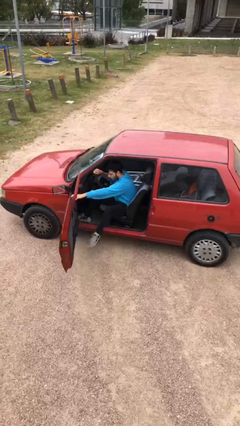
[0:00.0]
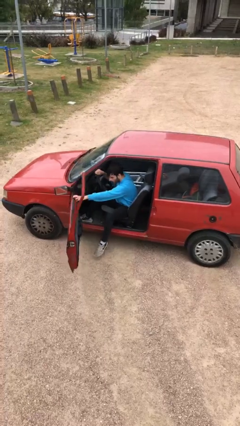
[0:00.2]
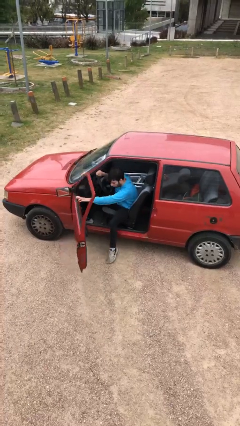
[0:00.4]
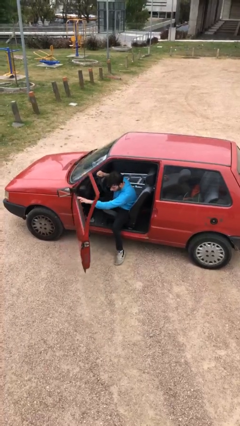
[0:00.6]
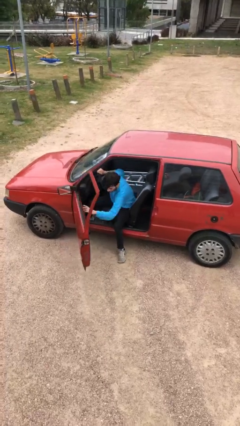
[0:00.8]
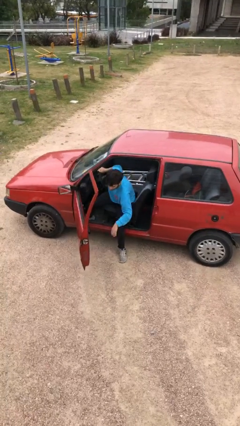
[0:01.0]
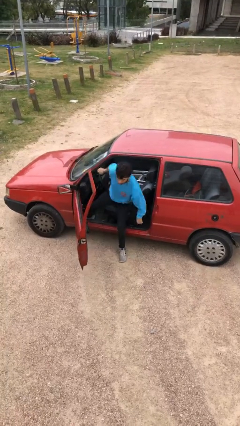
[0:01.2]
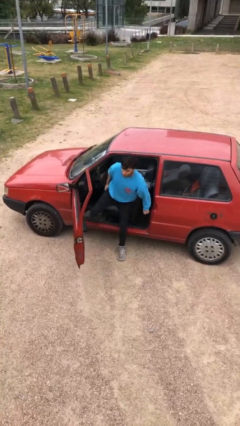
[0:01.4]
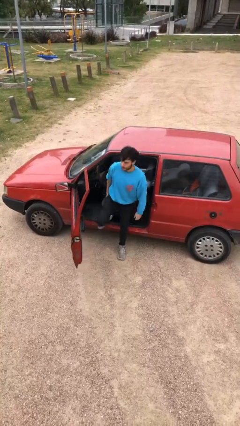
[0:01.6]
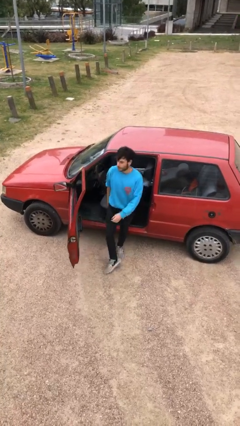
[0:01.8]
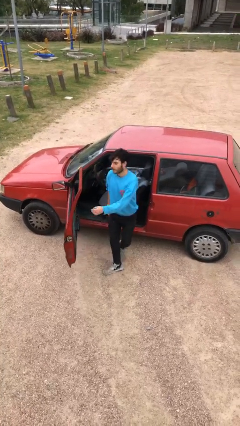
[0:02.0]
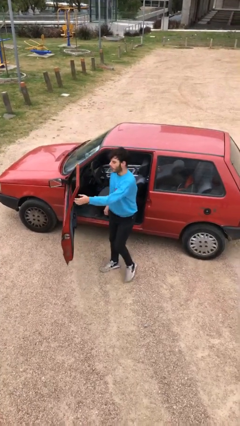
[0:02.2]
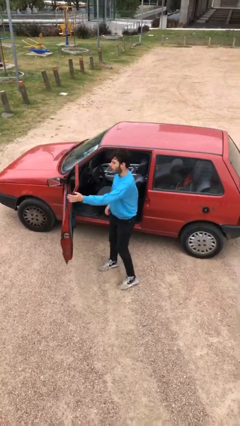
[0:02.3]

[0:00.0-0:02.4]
person exits car

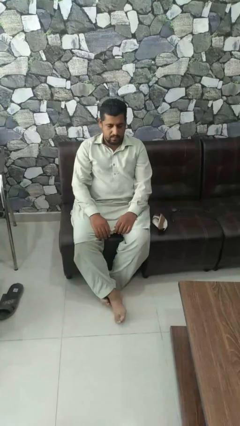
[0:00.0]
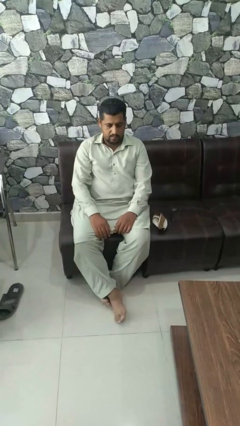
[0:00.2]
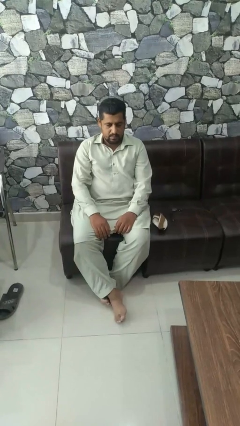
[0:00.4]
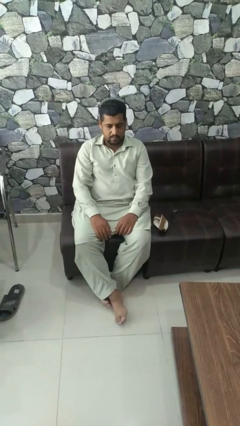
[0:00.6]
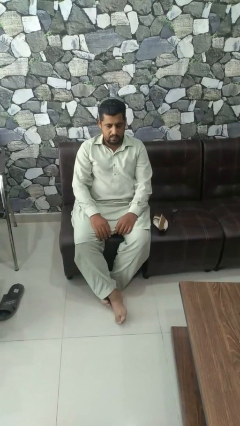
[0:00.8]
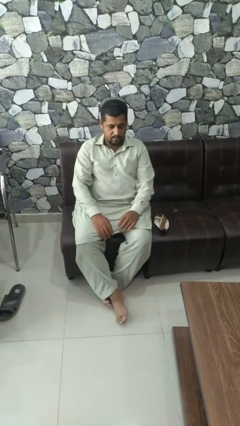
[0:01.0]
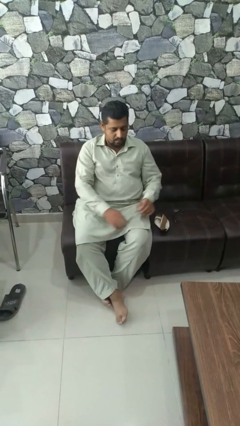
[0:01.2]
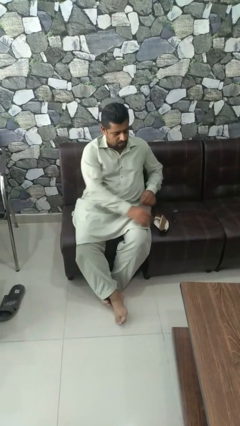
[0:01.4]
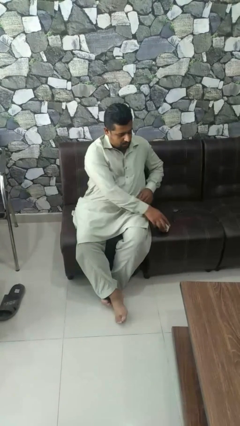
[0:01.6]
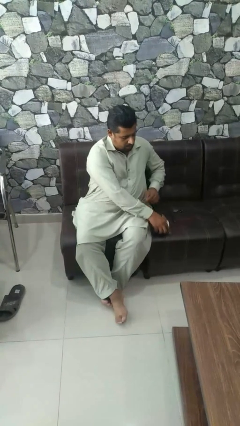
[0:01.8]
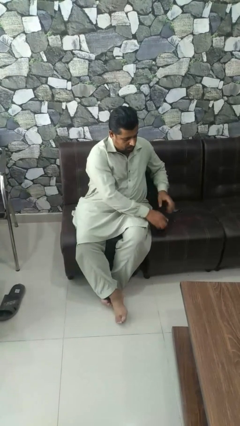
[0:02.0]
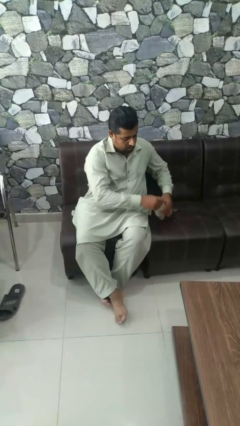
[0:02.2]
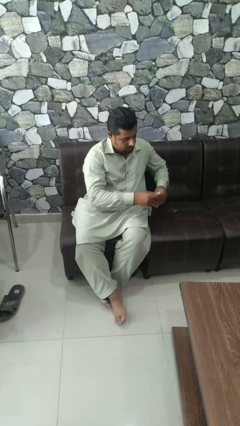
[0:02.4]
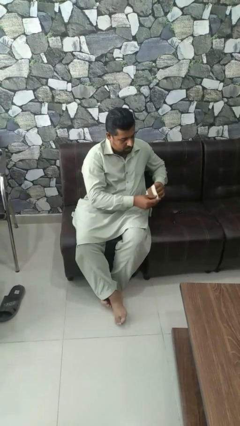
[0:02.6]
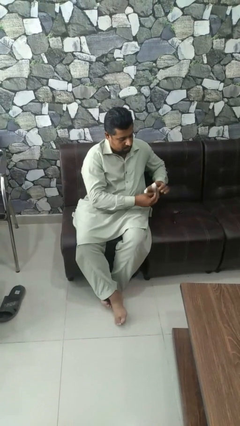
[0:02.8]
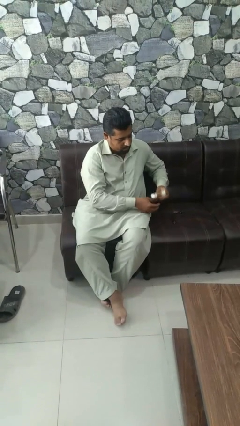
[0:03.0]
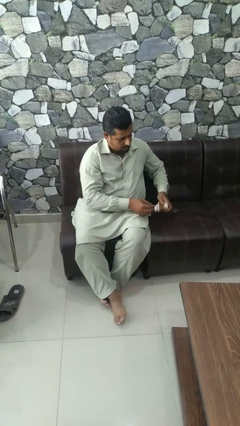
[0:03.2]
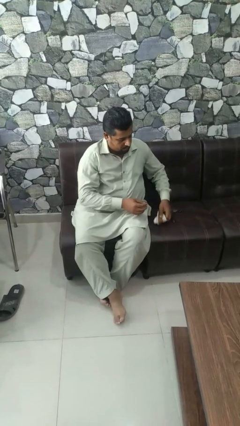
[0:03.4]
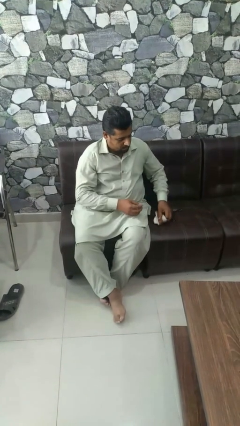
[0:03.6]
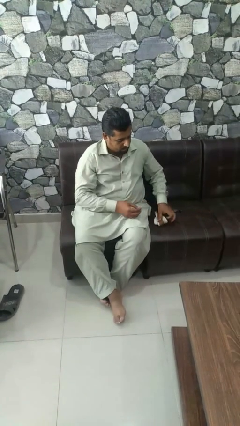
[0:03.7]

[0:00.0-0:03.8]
person folds socks

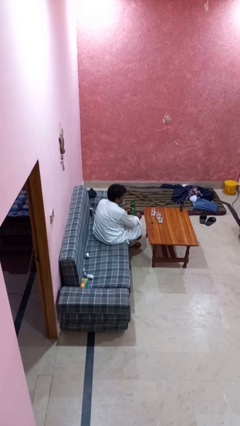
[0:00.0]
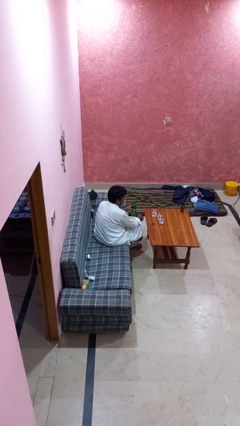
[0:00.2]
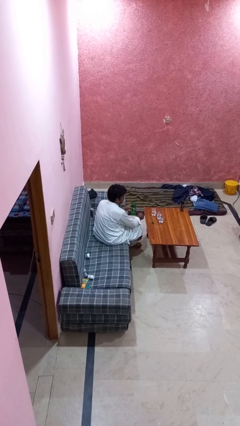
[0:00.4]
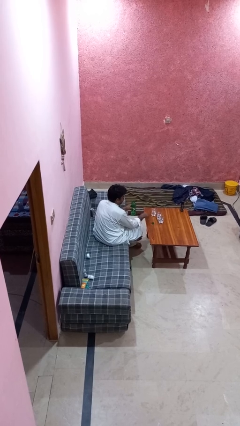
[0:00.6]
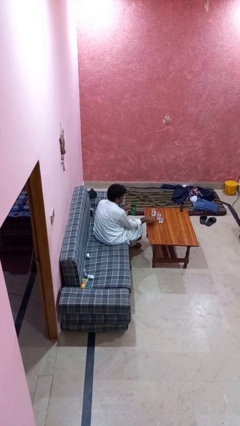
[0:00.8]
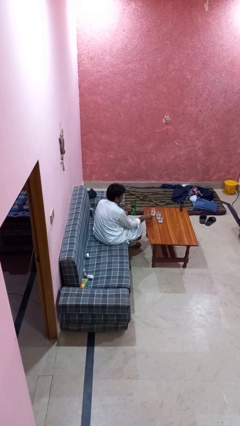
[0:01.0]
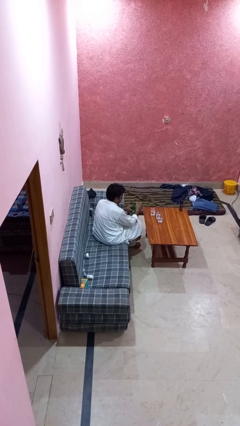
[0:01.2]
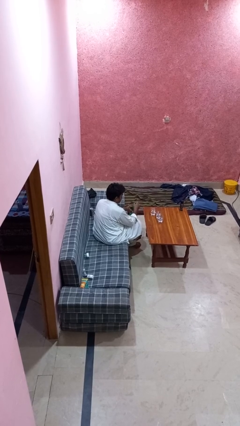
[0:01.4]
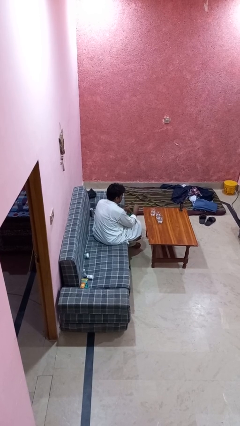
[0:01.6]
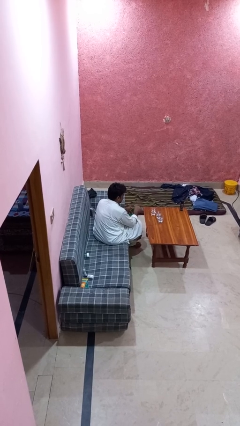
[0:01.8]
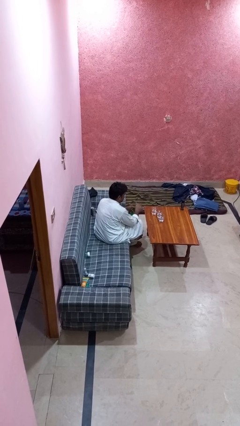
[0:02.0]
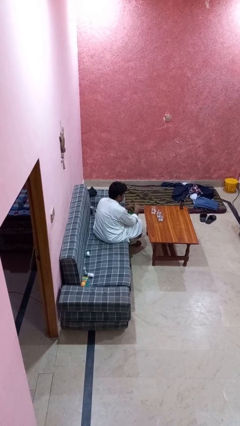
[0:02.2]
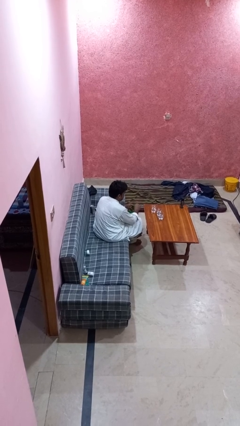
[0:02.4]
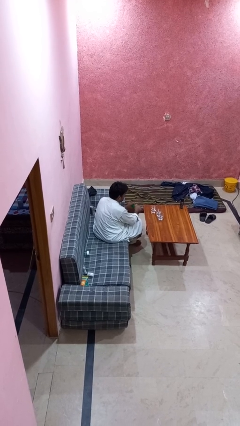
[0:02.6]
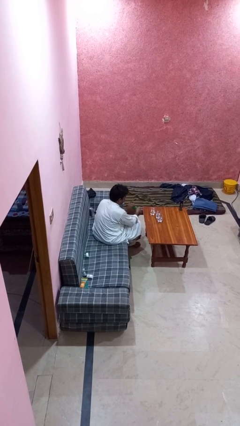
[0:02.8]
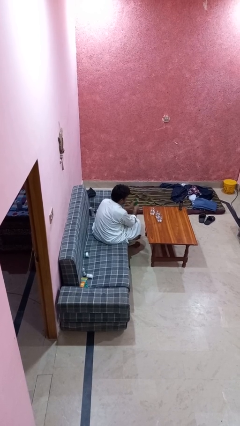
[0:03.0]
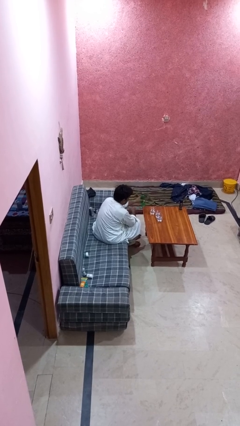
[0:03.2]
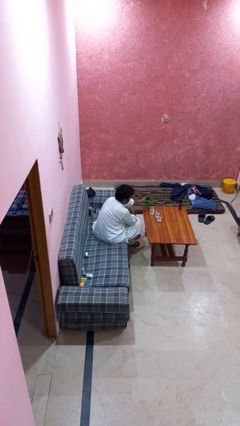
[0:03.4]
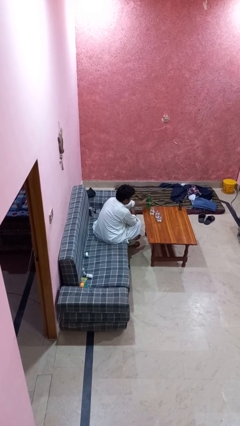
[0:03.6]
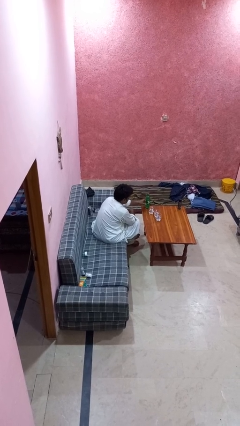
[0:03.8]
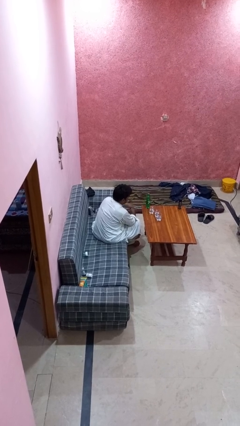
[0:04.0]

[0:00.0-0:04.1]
person screws lid to bottle

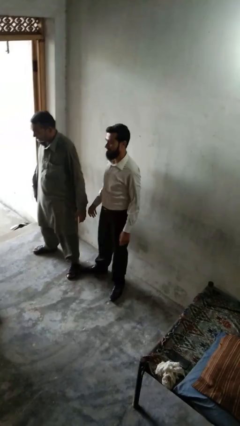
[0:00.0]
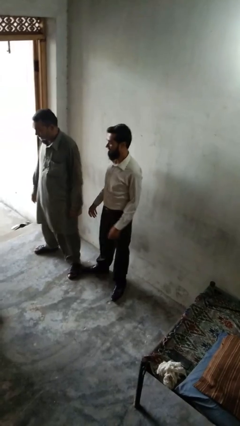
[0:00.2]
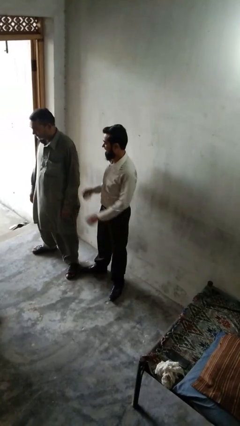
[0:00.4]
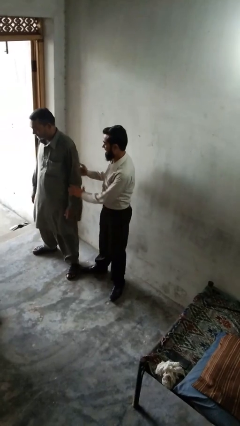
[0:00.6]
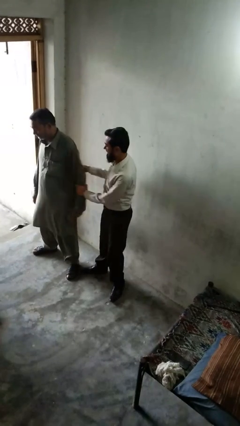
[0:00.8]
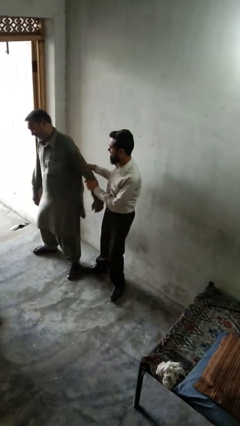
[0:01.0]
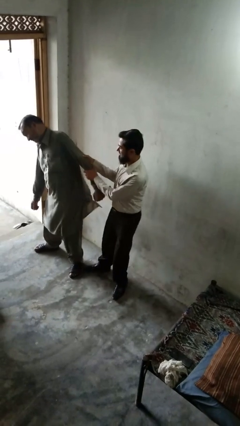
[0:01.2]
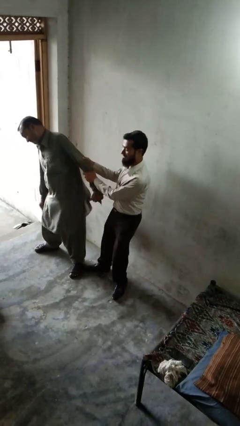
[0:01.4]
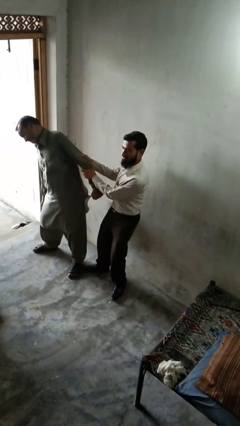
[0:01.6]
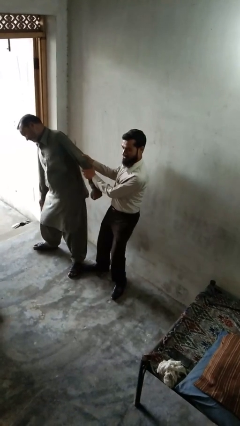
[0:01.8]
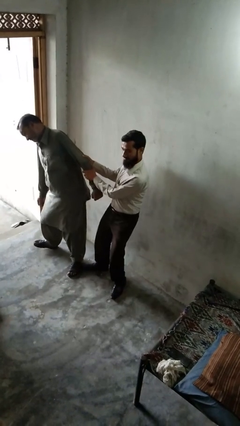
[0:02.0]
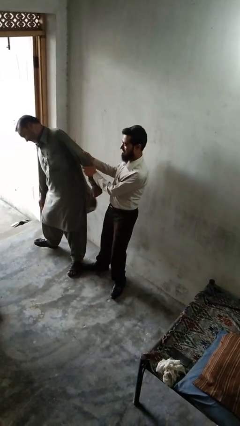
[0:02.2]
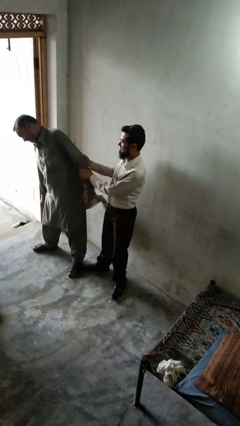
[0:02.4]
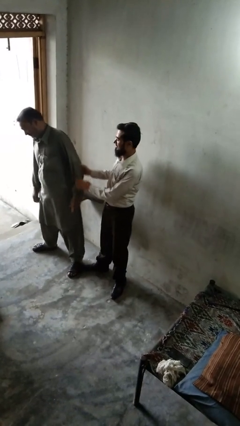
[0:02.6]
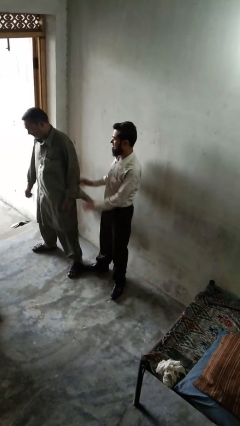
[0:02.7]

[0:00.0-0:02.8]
person grabs person by forearm

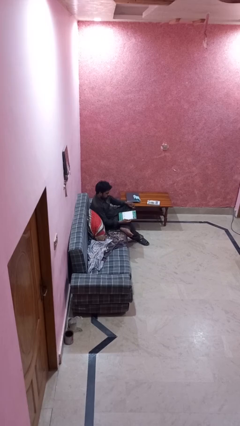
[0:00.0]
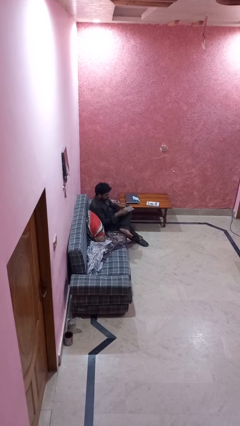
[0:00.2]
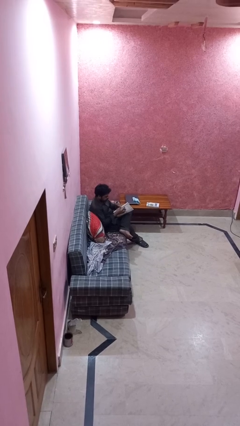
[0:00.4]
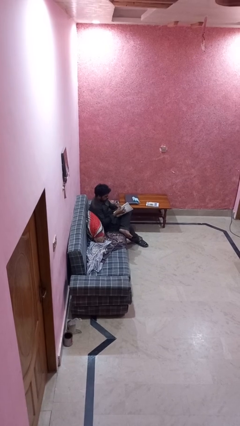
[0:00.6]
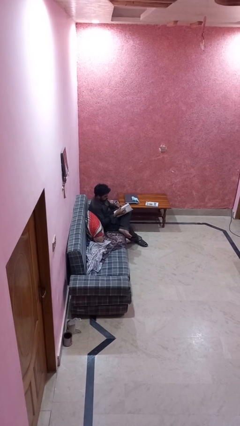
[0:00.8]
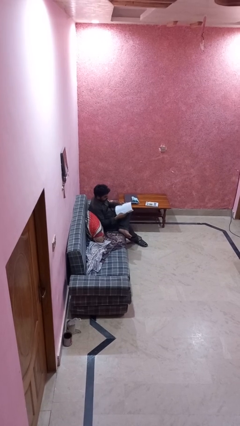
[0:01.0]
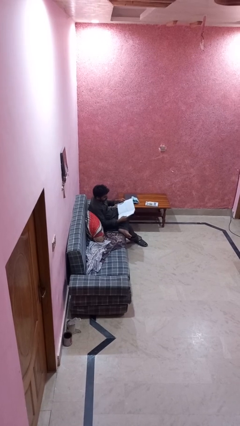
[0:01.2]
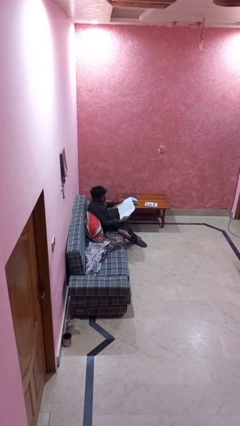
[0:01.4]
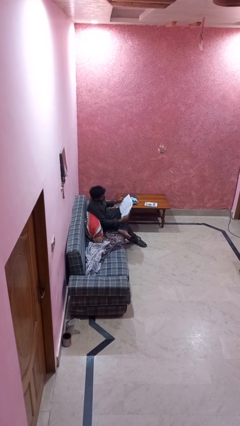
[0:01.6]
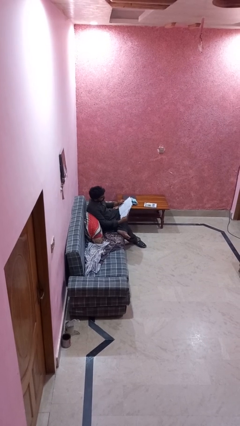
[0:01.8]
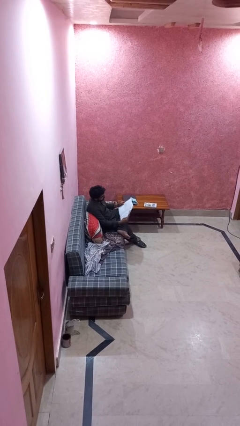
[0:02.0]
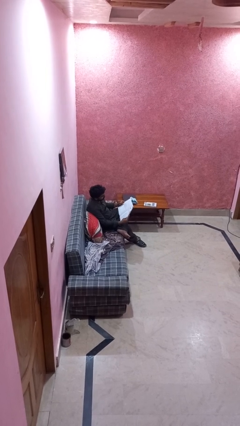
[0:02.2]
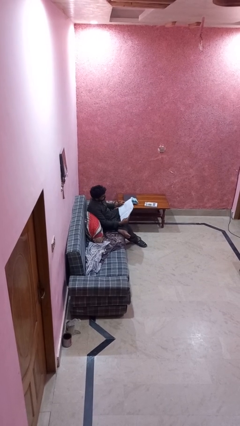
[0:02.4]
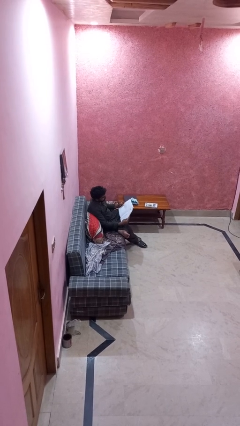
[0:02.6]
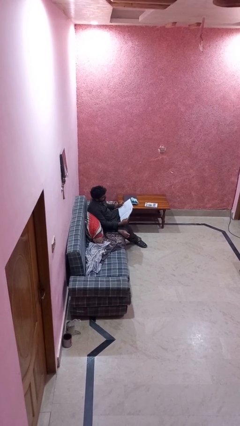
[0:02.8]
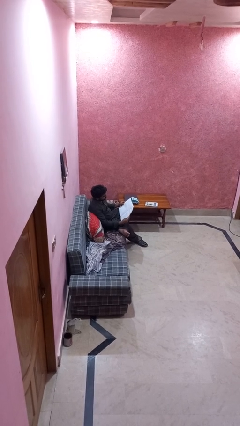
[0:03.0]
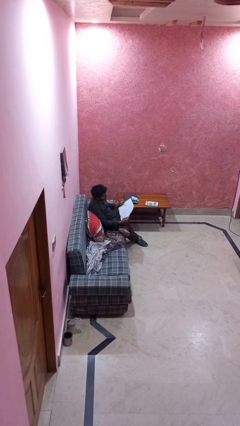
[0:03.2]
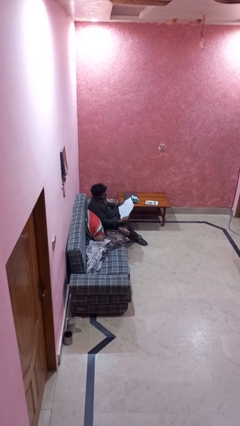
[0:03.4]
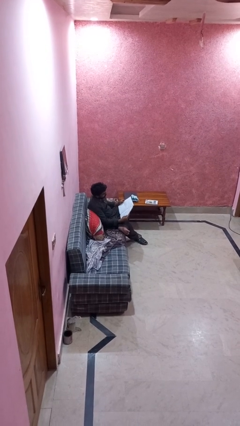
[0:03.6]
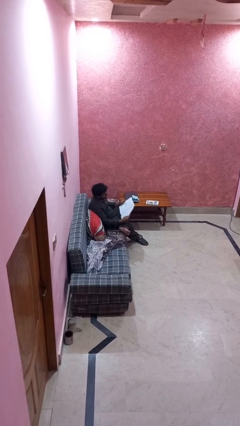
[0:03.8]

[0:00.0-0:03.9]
person reads magazine

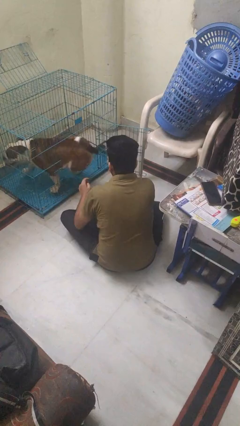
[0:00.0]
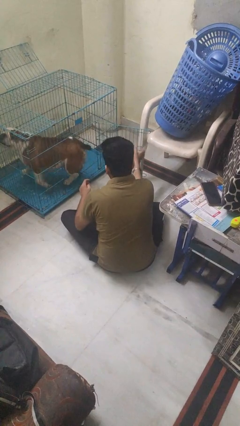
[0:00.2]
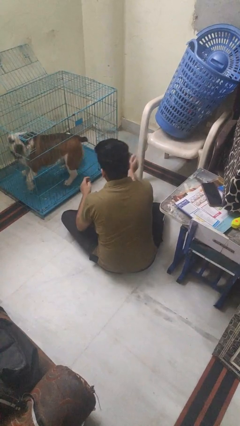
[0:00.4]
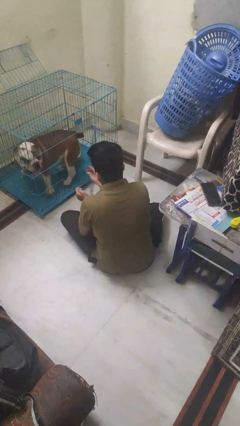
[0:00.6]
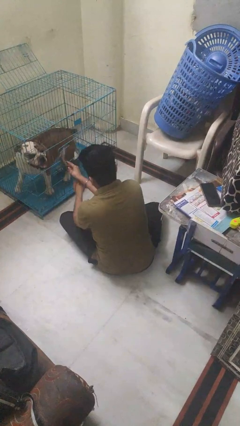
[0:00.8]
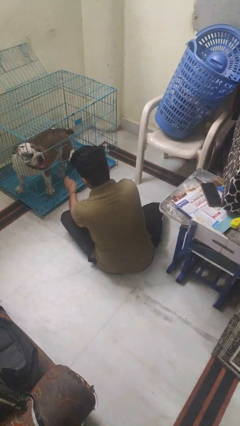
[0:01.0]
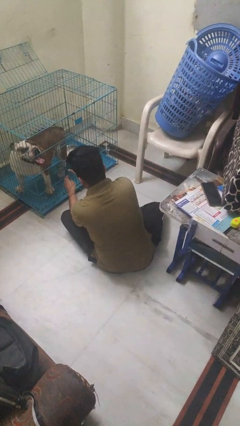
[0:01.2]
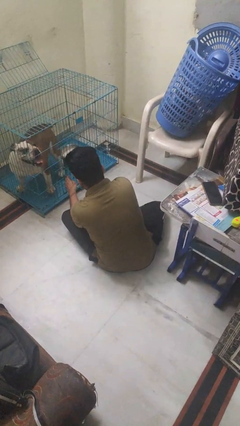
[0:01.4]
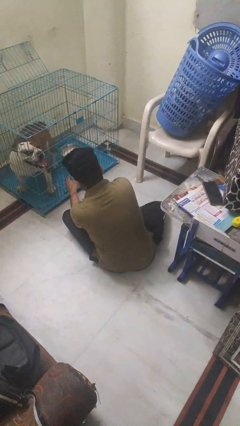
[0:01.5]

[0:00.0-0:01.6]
person crates dog
